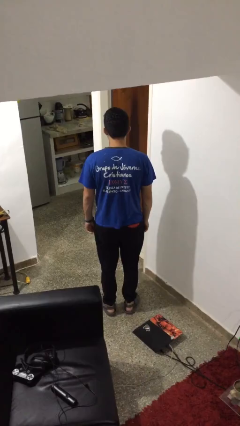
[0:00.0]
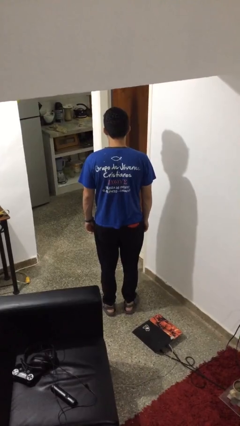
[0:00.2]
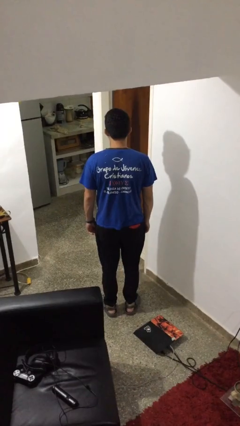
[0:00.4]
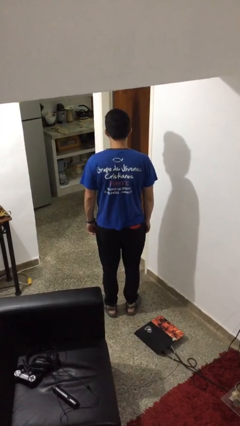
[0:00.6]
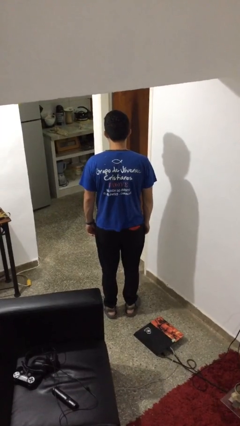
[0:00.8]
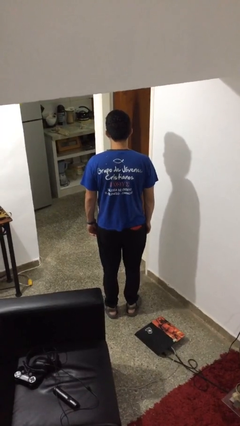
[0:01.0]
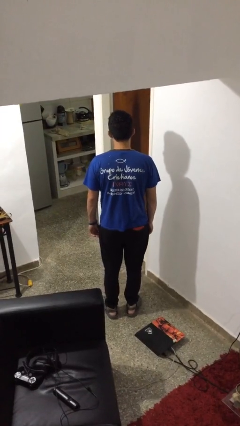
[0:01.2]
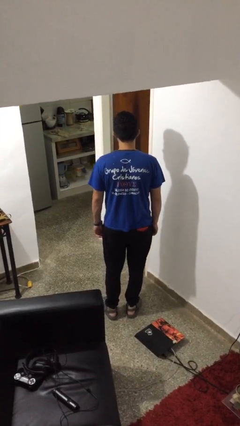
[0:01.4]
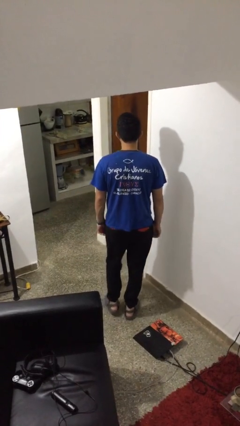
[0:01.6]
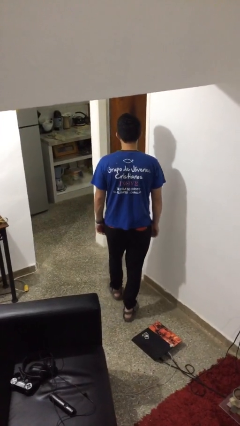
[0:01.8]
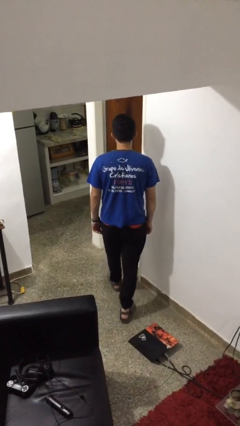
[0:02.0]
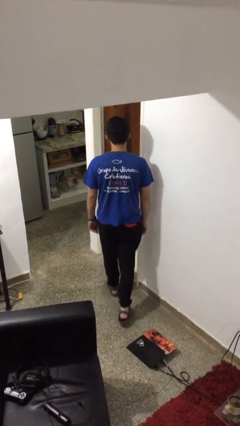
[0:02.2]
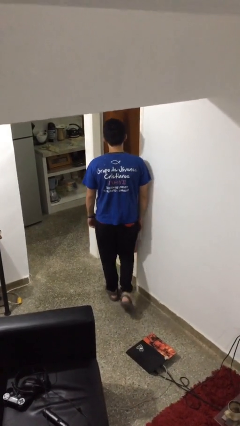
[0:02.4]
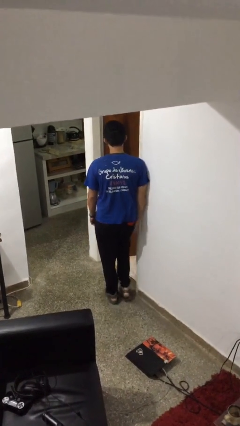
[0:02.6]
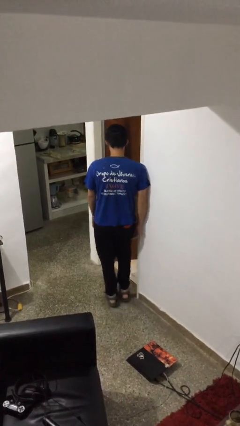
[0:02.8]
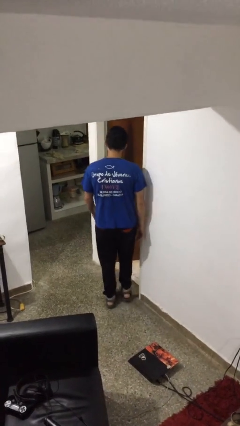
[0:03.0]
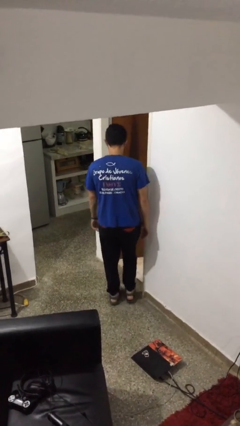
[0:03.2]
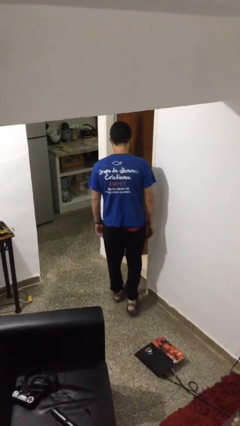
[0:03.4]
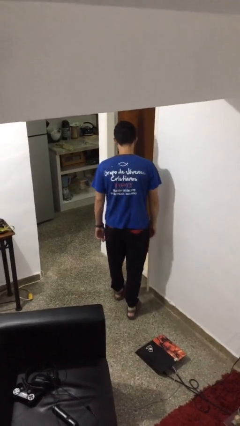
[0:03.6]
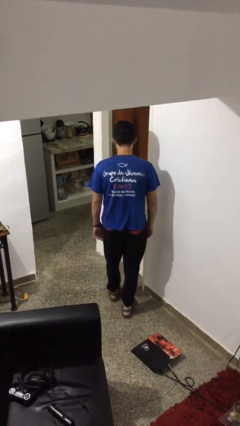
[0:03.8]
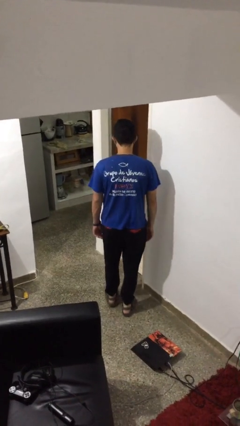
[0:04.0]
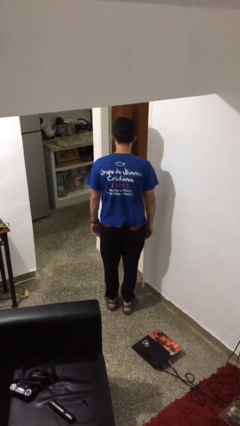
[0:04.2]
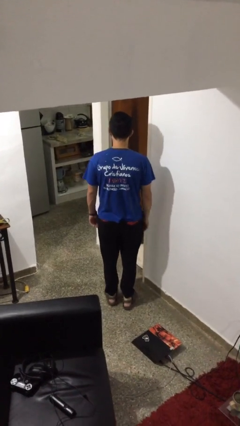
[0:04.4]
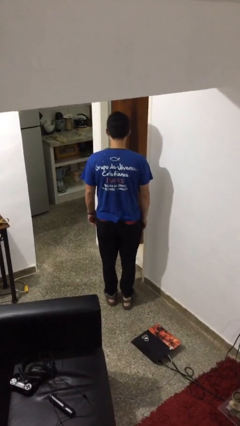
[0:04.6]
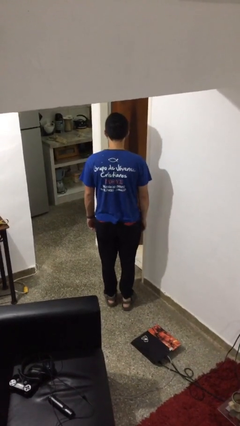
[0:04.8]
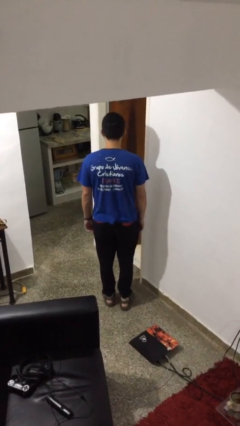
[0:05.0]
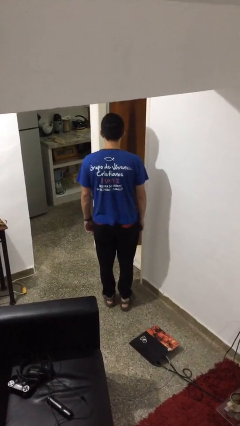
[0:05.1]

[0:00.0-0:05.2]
person bumps into wall

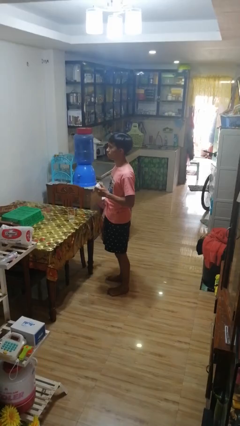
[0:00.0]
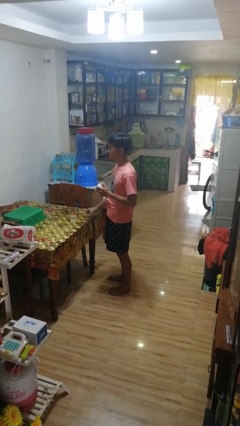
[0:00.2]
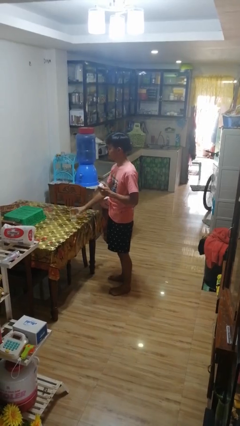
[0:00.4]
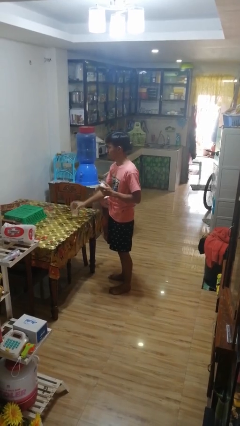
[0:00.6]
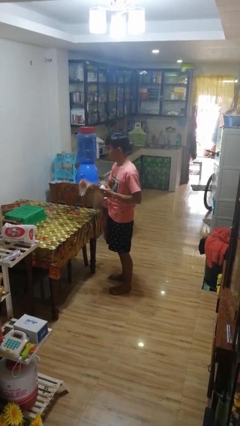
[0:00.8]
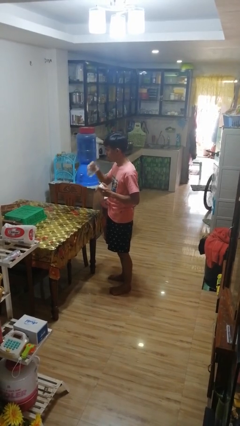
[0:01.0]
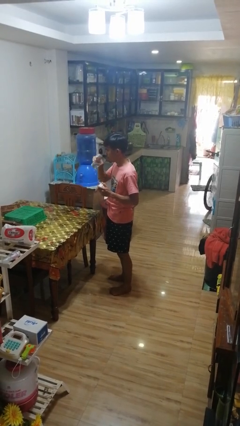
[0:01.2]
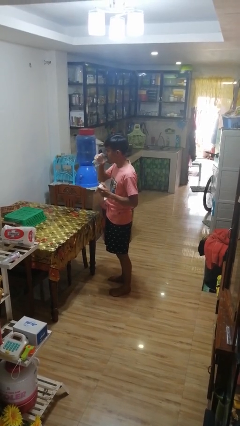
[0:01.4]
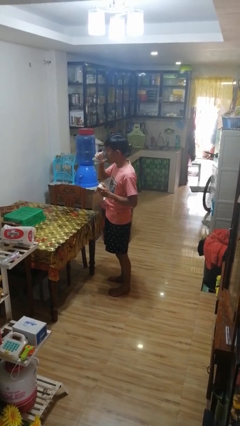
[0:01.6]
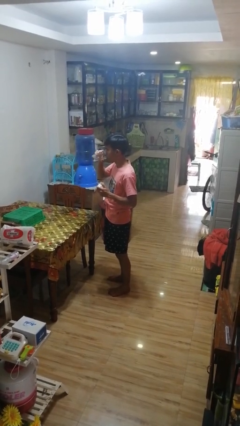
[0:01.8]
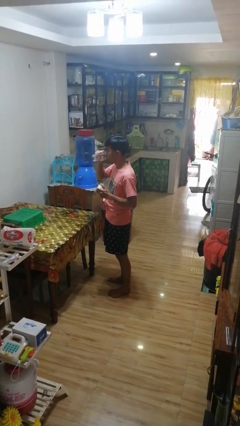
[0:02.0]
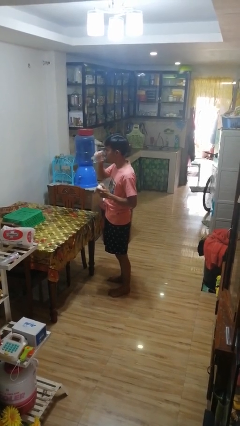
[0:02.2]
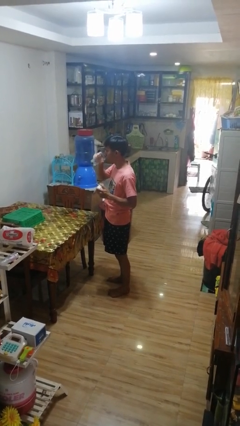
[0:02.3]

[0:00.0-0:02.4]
person drinks from cup

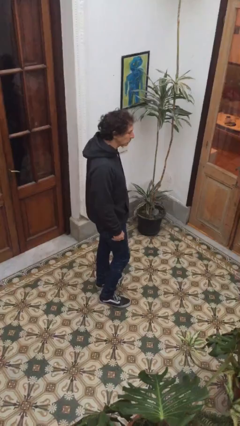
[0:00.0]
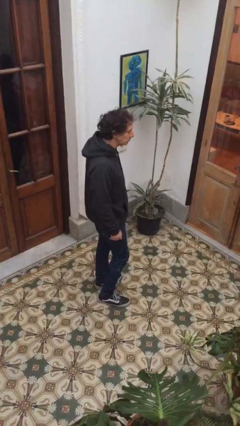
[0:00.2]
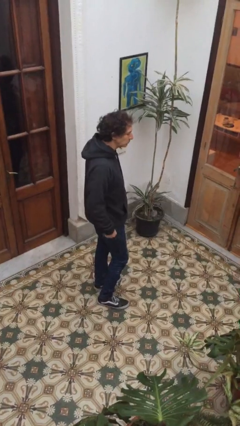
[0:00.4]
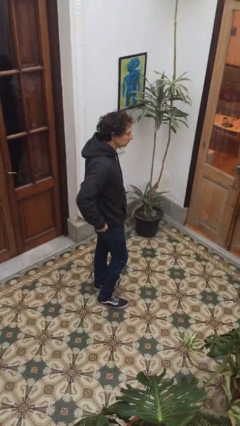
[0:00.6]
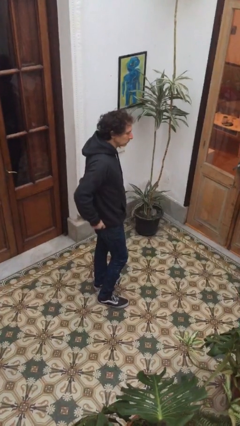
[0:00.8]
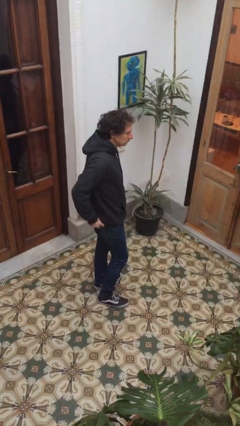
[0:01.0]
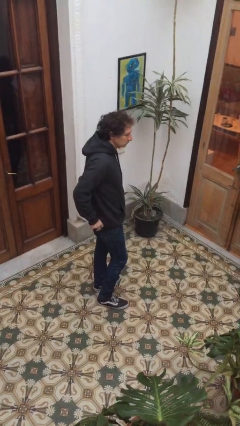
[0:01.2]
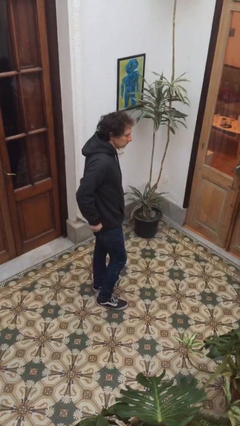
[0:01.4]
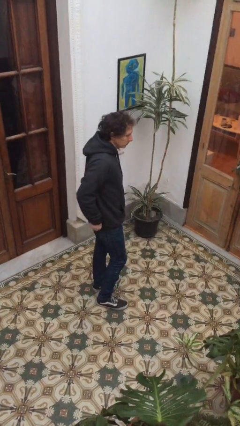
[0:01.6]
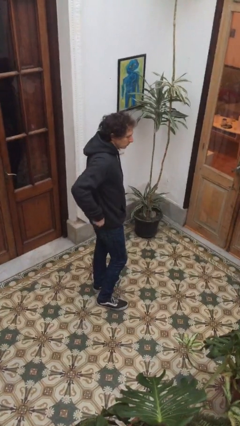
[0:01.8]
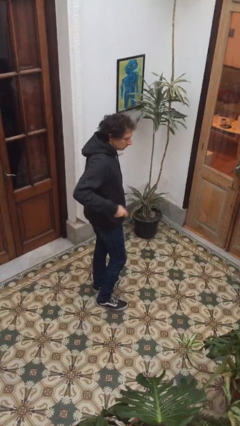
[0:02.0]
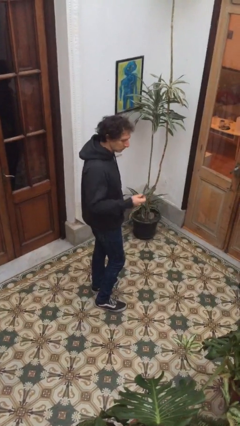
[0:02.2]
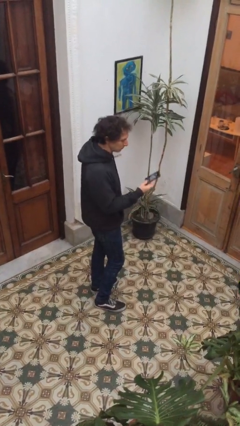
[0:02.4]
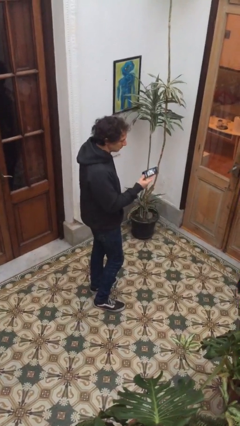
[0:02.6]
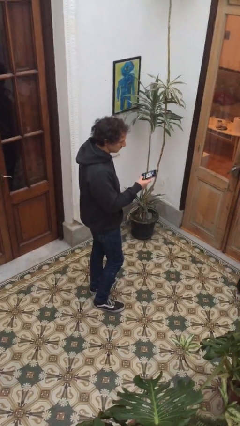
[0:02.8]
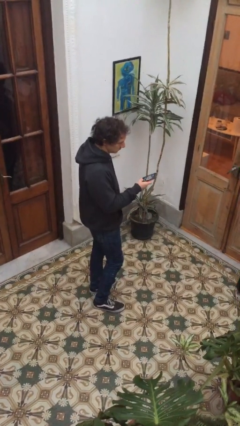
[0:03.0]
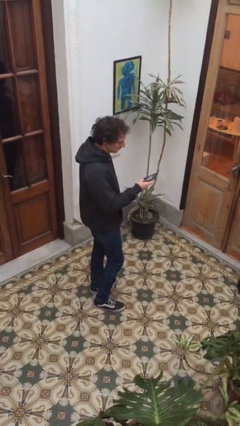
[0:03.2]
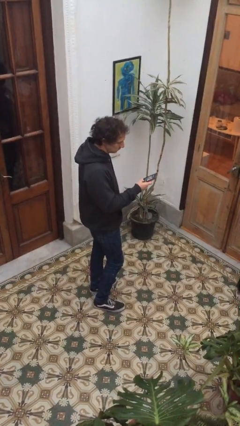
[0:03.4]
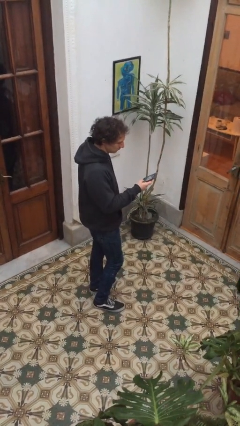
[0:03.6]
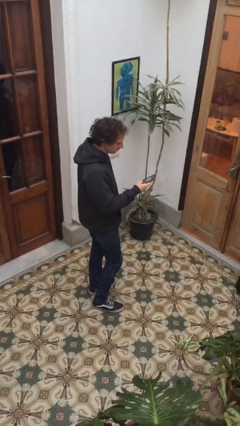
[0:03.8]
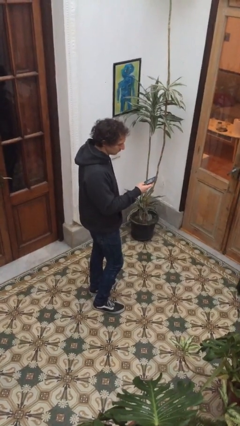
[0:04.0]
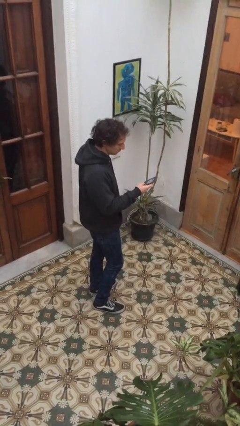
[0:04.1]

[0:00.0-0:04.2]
person takes phone from pocket

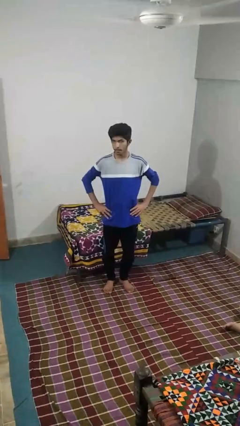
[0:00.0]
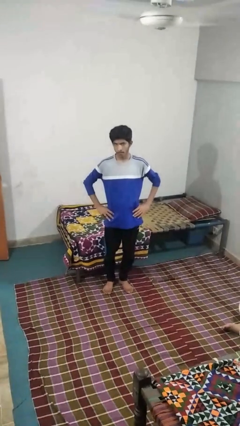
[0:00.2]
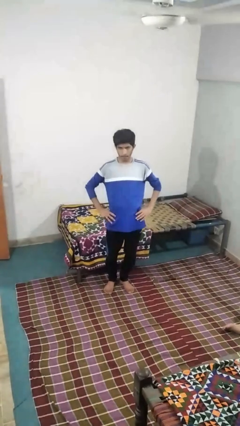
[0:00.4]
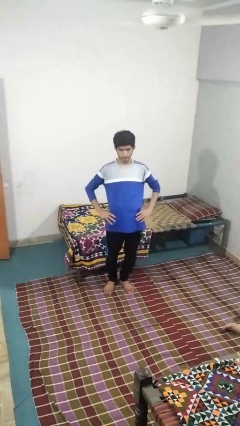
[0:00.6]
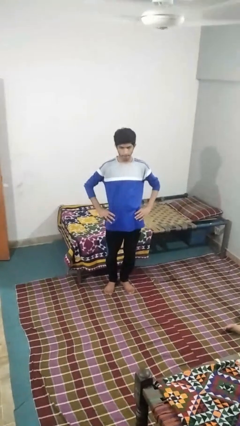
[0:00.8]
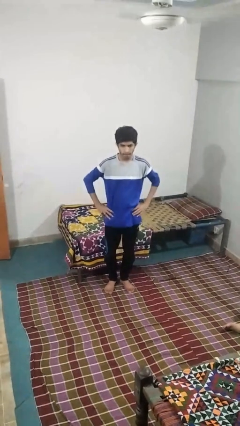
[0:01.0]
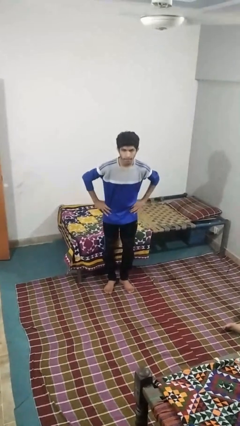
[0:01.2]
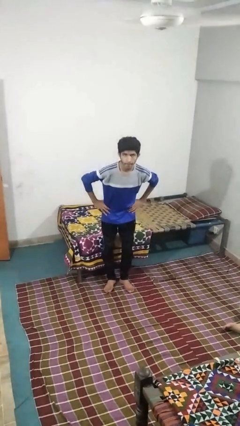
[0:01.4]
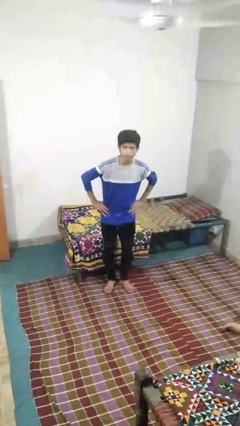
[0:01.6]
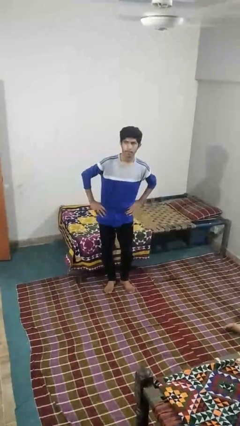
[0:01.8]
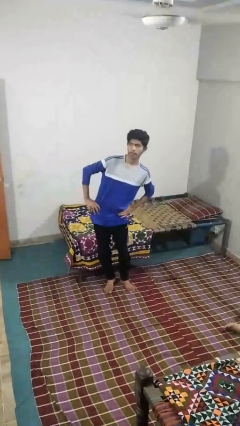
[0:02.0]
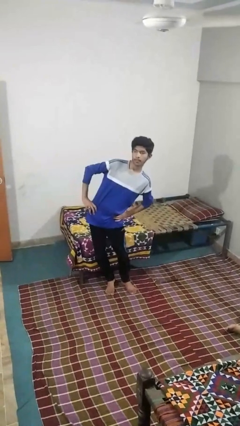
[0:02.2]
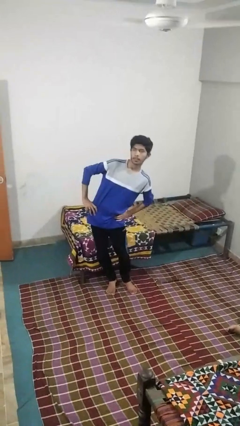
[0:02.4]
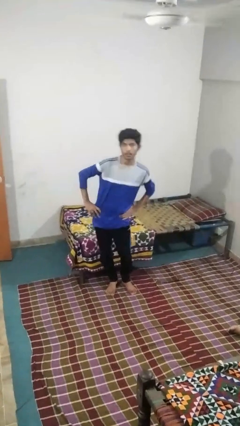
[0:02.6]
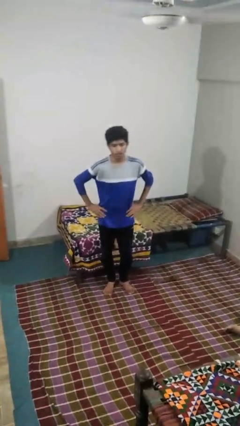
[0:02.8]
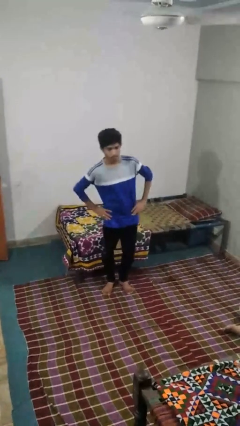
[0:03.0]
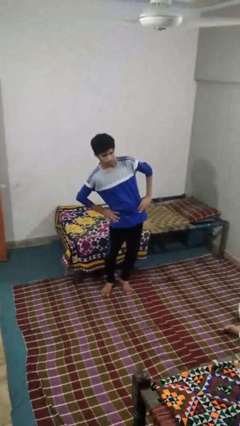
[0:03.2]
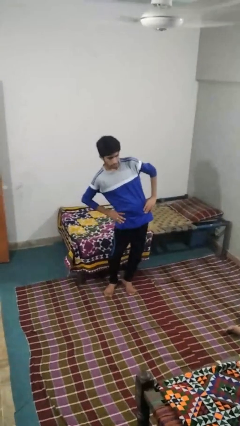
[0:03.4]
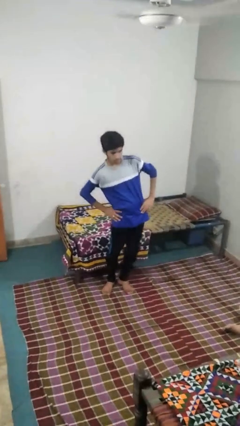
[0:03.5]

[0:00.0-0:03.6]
person wiggles hips

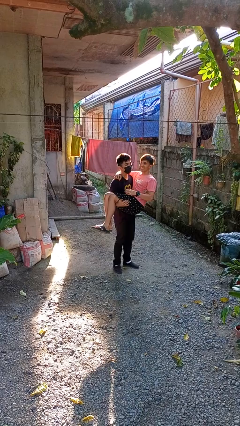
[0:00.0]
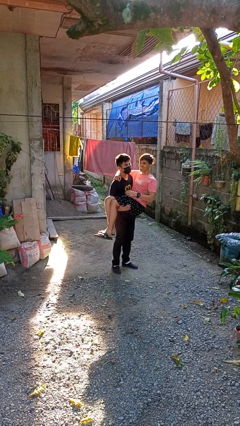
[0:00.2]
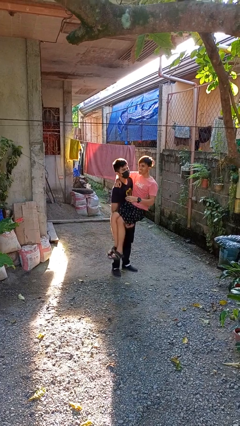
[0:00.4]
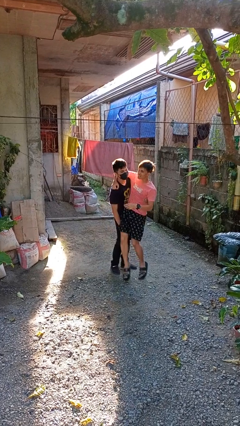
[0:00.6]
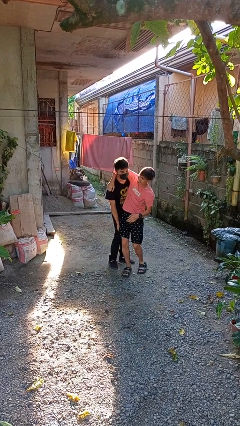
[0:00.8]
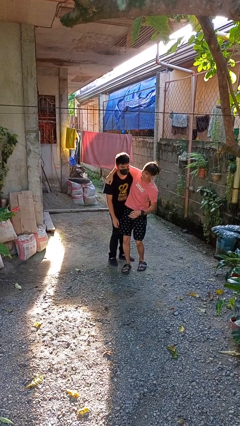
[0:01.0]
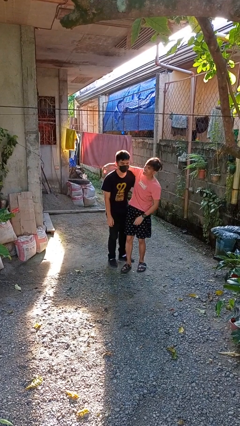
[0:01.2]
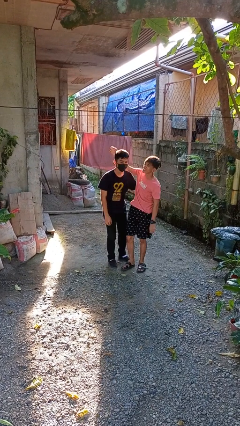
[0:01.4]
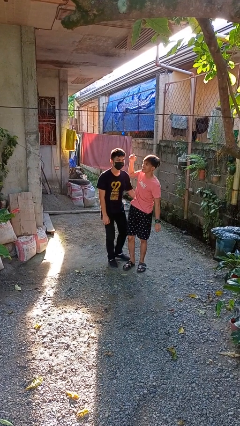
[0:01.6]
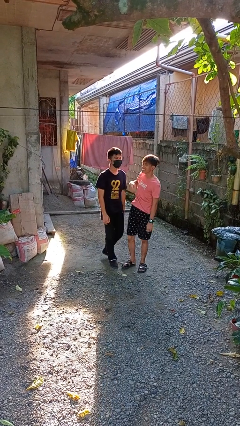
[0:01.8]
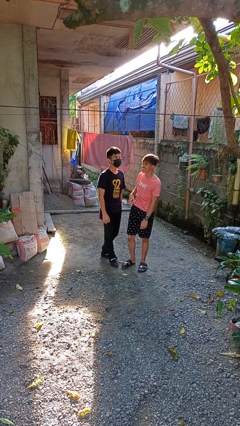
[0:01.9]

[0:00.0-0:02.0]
person puts down person
